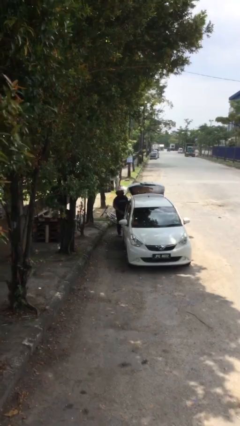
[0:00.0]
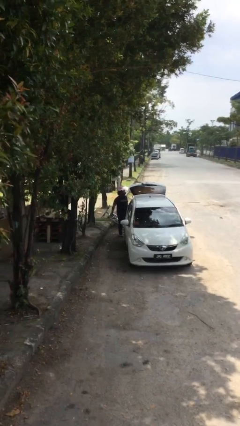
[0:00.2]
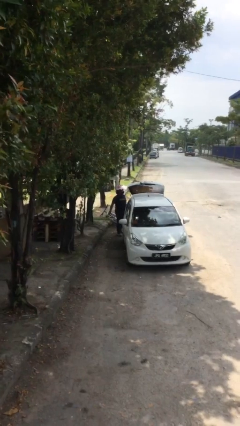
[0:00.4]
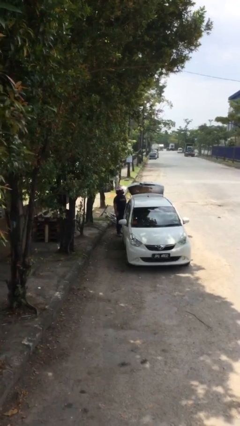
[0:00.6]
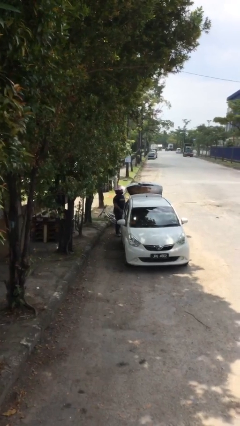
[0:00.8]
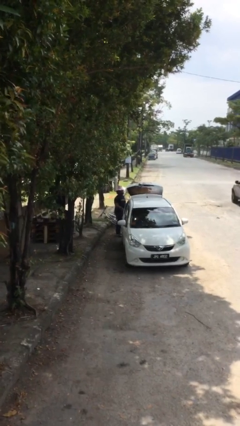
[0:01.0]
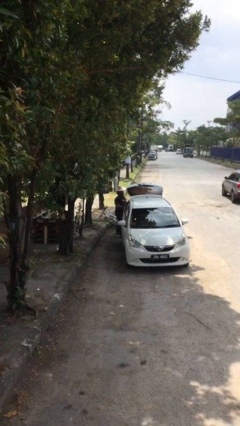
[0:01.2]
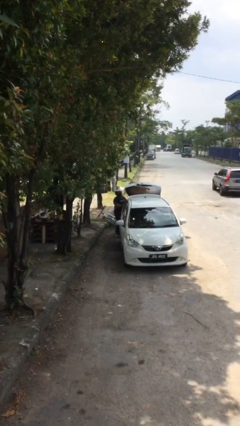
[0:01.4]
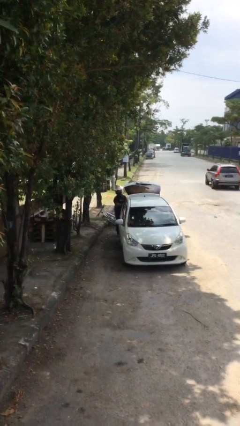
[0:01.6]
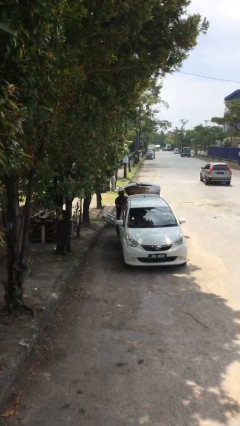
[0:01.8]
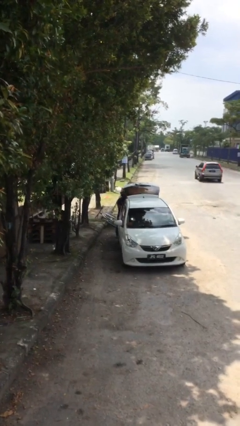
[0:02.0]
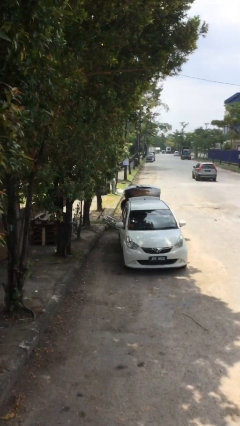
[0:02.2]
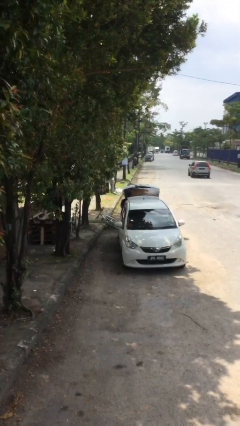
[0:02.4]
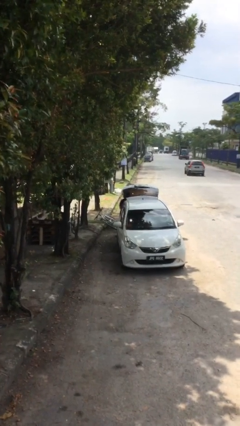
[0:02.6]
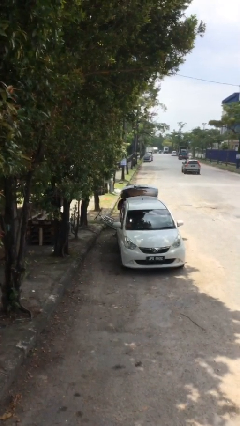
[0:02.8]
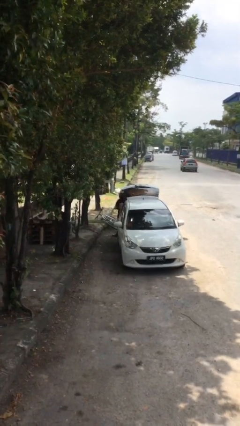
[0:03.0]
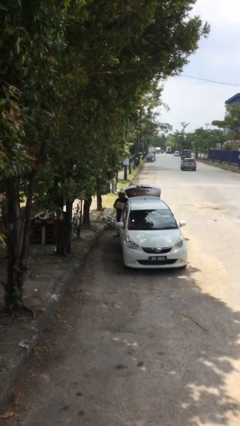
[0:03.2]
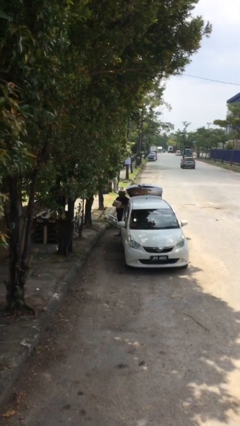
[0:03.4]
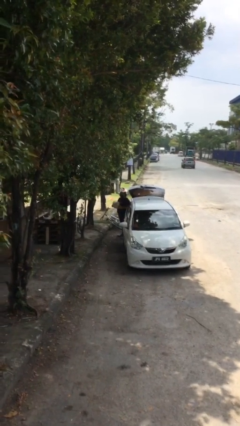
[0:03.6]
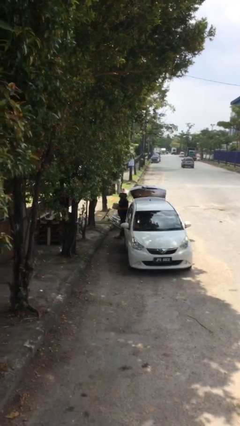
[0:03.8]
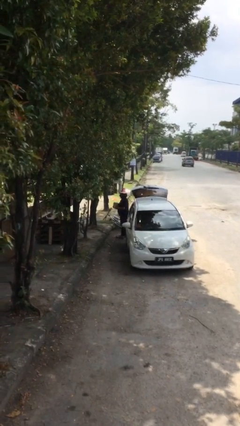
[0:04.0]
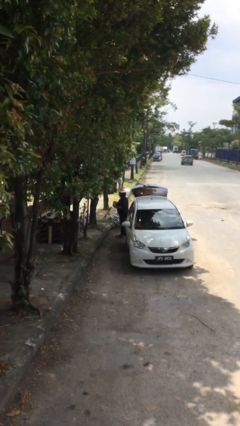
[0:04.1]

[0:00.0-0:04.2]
person unloads car

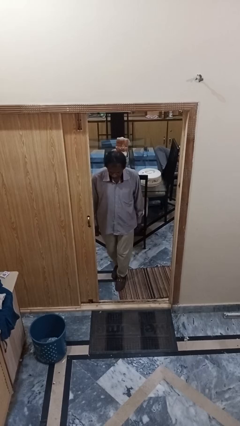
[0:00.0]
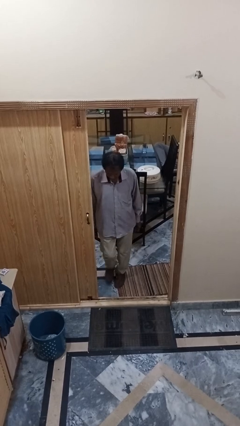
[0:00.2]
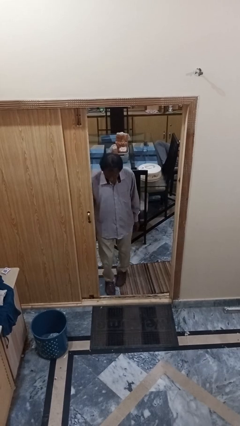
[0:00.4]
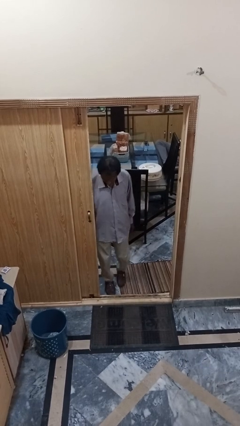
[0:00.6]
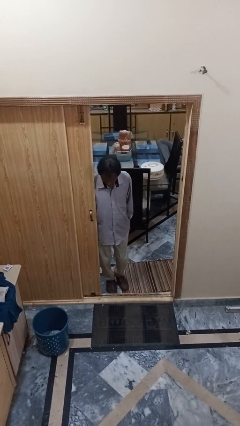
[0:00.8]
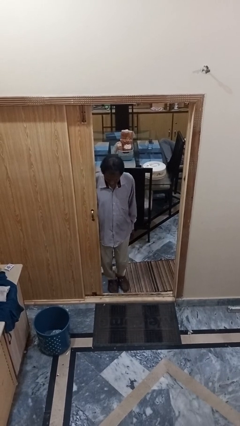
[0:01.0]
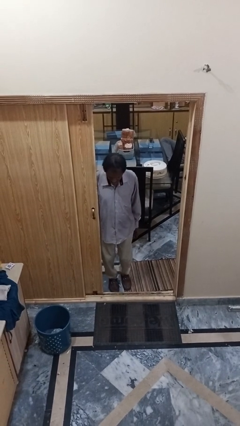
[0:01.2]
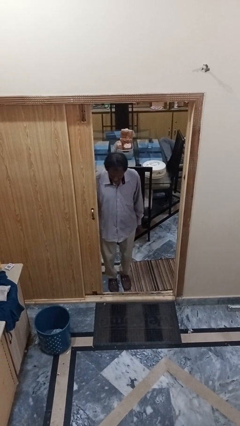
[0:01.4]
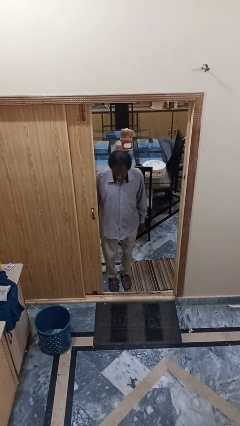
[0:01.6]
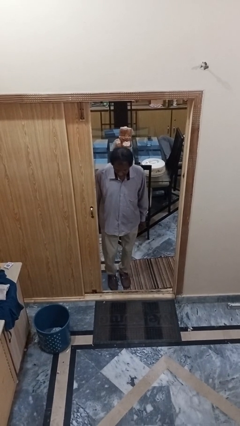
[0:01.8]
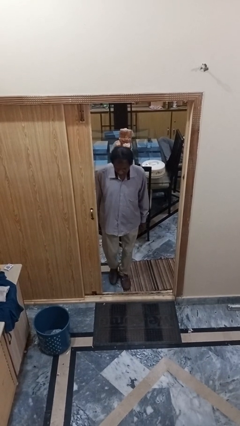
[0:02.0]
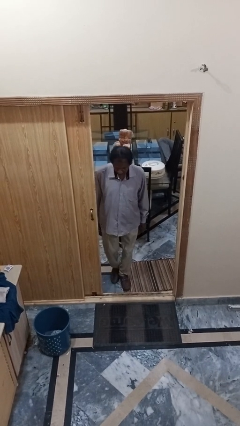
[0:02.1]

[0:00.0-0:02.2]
person bumps into wall

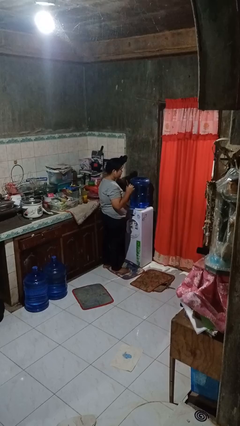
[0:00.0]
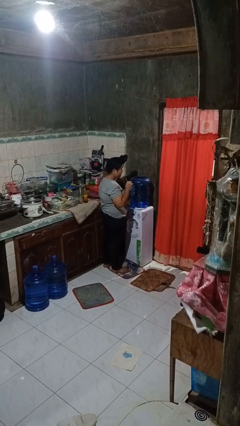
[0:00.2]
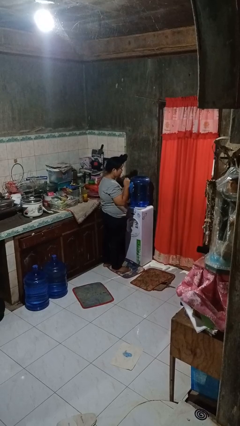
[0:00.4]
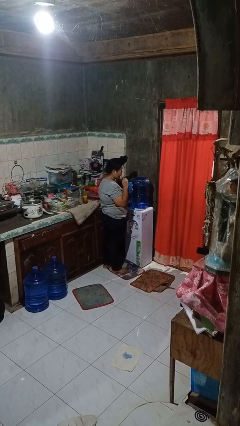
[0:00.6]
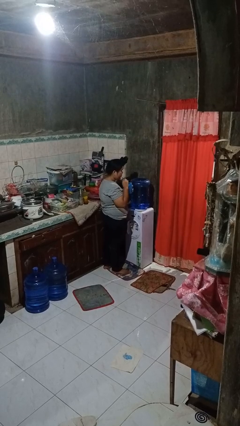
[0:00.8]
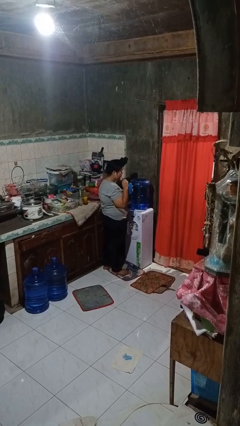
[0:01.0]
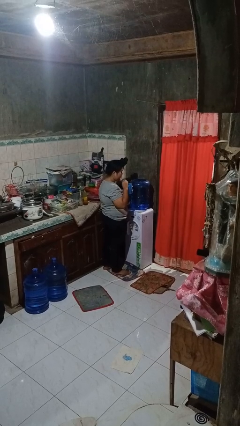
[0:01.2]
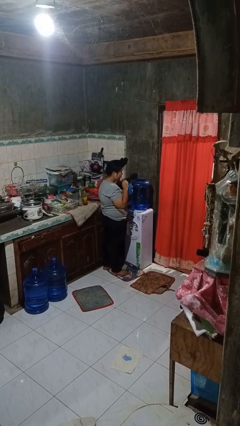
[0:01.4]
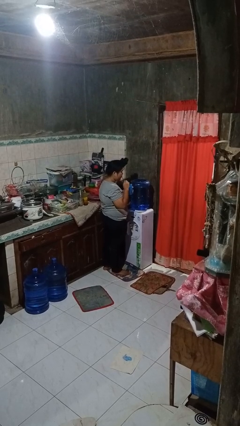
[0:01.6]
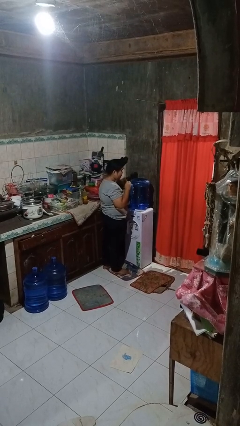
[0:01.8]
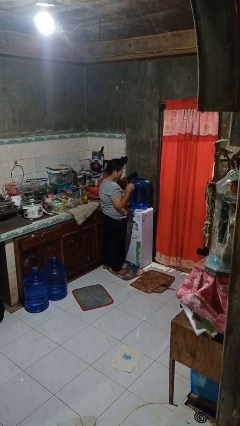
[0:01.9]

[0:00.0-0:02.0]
person drinks from straw

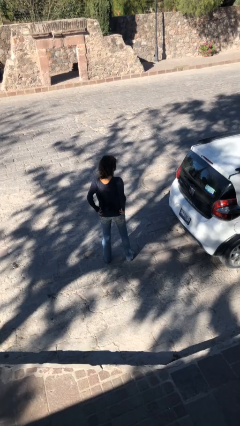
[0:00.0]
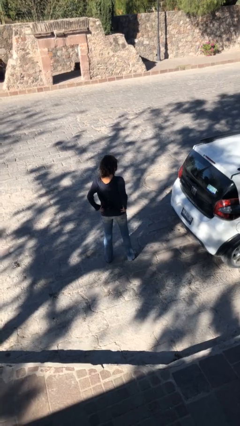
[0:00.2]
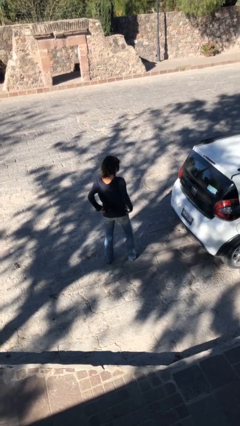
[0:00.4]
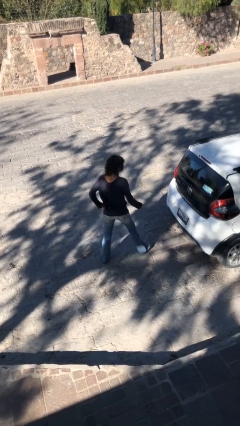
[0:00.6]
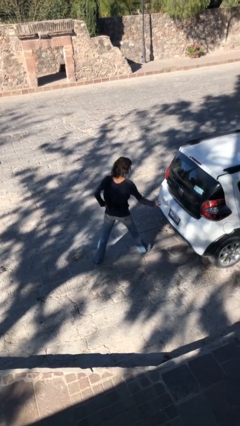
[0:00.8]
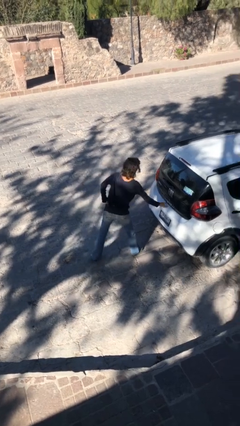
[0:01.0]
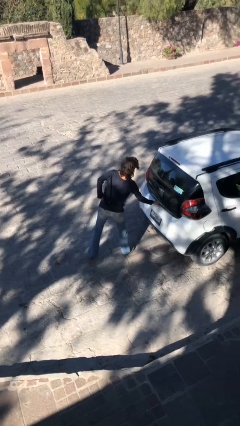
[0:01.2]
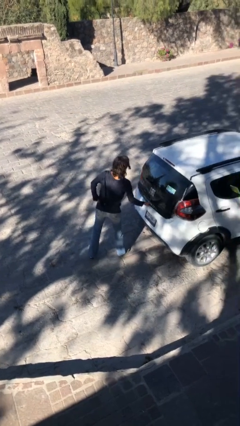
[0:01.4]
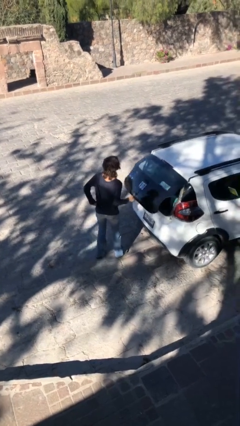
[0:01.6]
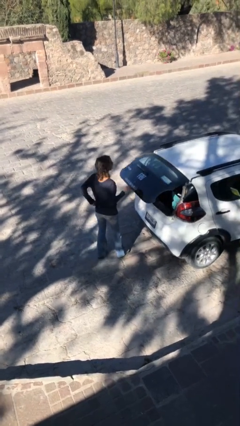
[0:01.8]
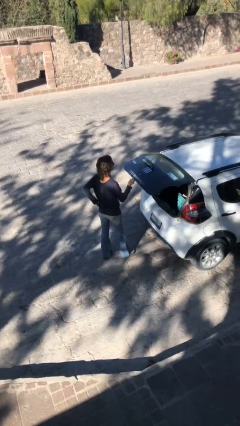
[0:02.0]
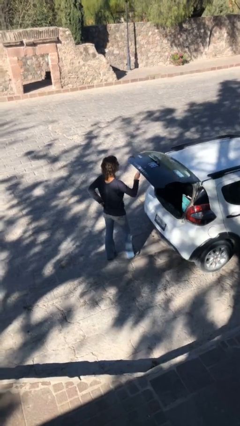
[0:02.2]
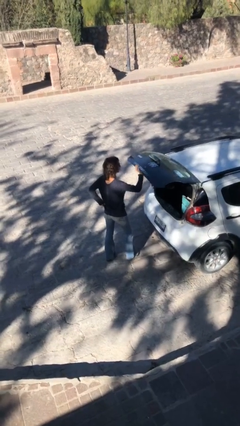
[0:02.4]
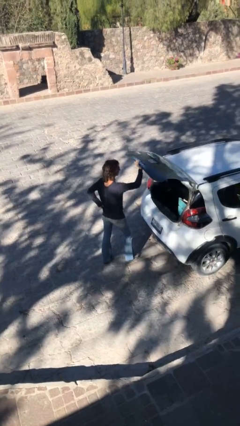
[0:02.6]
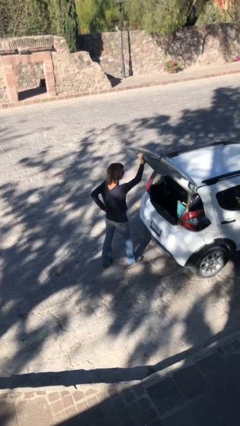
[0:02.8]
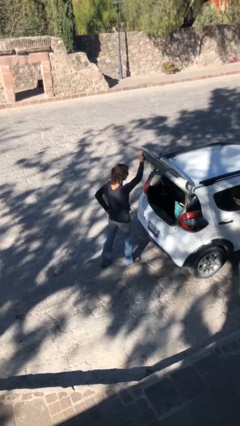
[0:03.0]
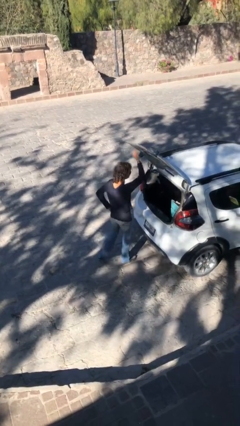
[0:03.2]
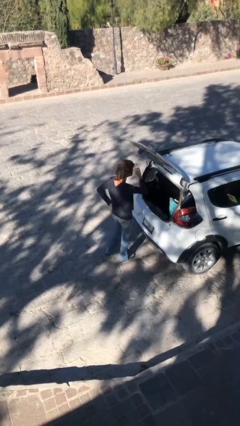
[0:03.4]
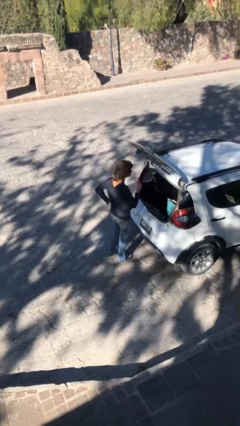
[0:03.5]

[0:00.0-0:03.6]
person opens car trunk

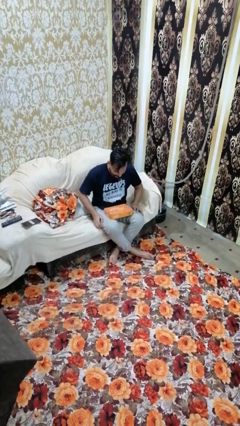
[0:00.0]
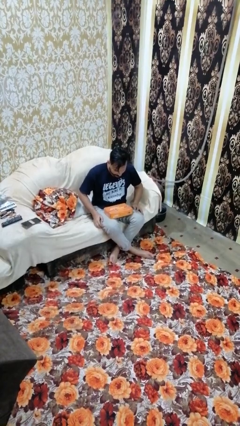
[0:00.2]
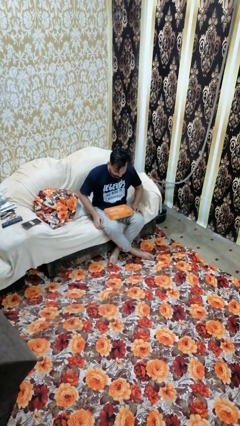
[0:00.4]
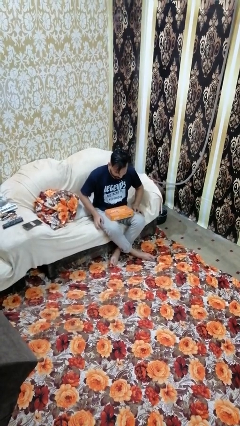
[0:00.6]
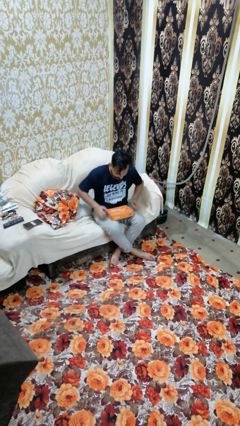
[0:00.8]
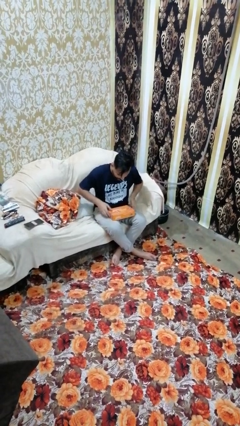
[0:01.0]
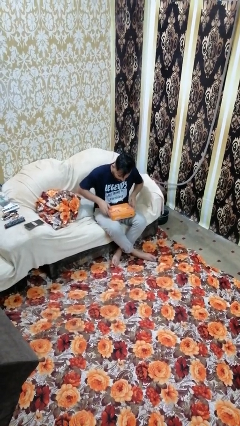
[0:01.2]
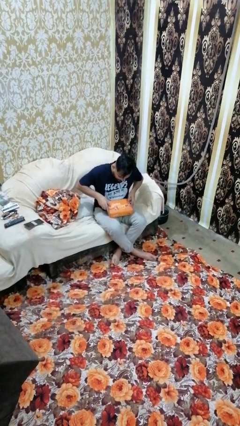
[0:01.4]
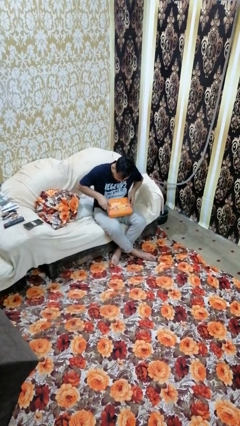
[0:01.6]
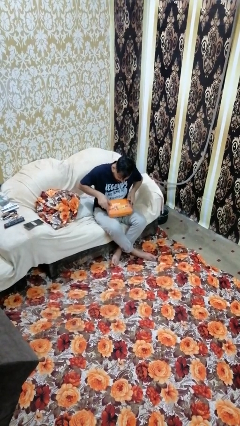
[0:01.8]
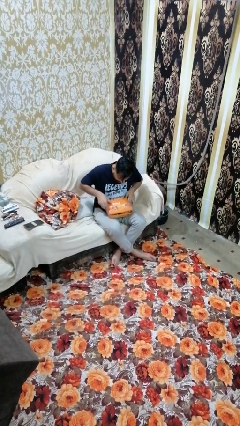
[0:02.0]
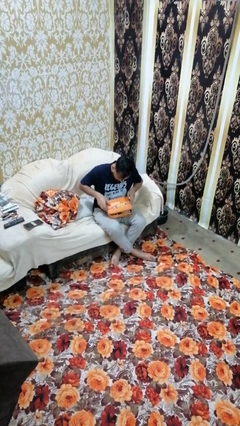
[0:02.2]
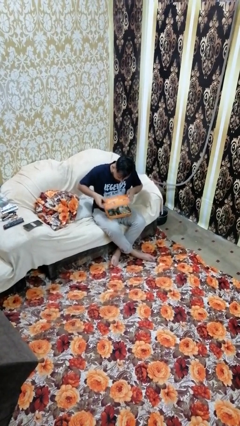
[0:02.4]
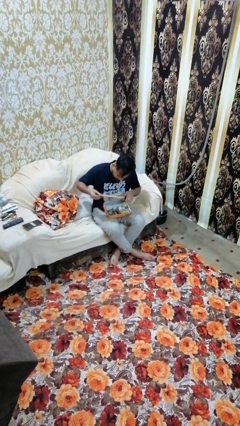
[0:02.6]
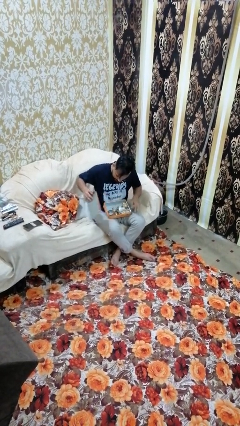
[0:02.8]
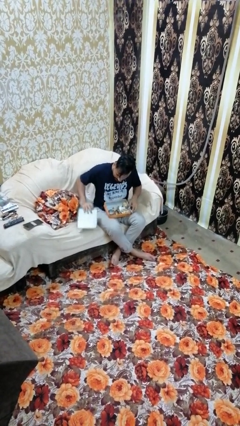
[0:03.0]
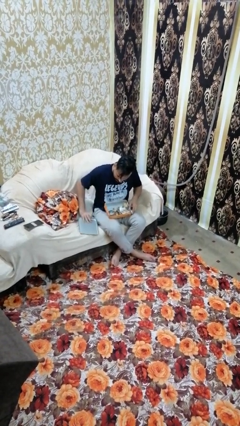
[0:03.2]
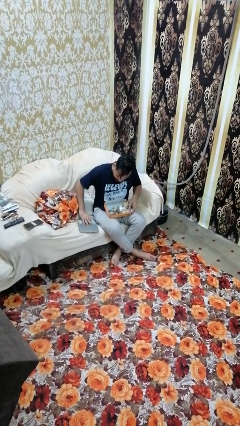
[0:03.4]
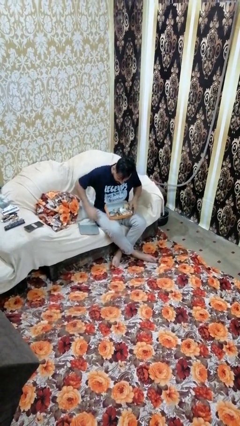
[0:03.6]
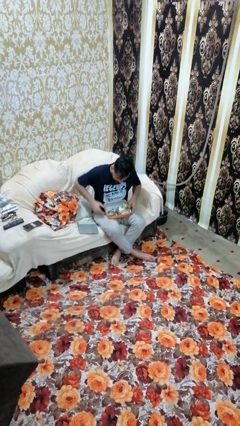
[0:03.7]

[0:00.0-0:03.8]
person opens jewelry box

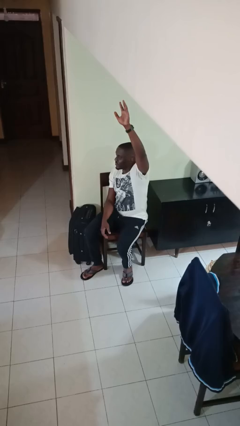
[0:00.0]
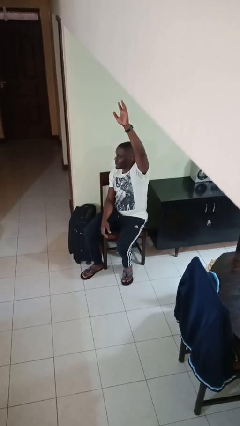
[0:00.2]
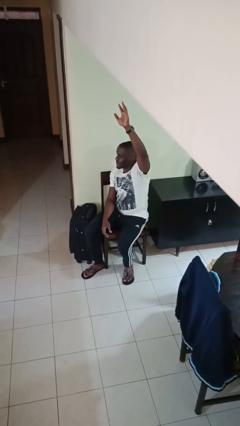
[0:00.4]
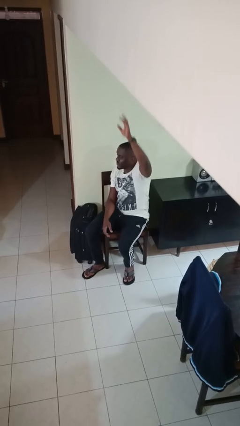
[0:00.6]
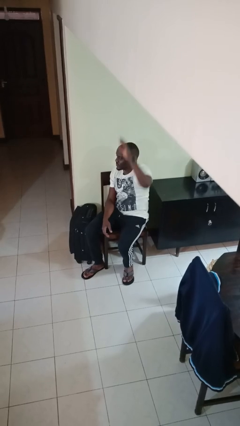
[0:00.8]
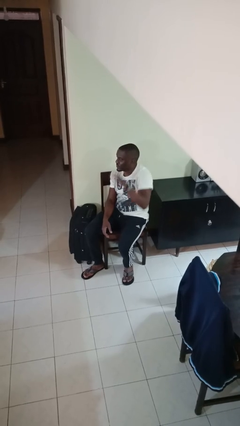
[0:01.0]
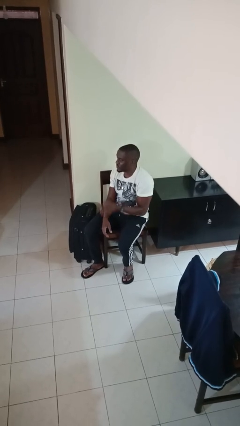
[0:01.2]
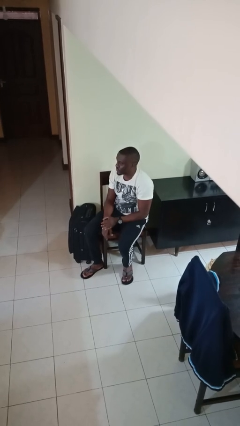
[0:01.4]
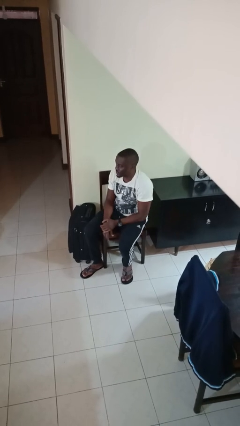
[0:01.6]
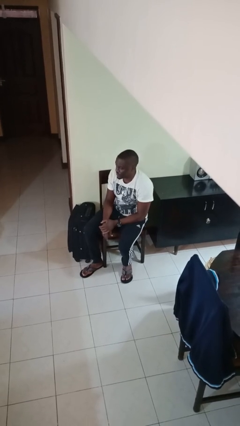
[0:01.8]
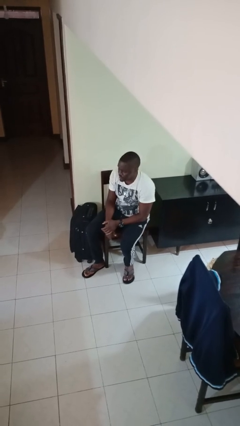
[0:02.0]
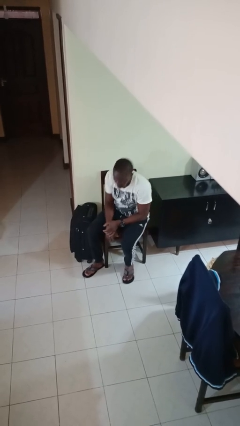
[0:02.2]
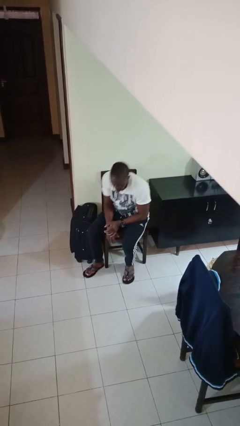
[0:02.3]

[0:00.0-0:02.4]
person gestures lower hand
